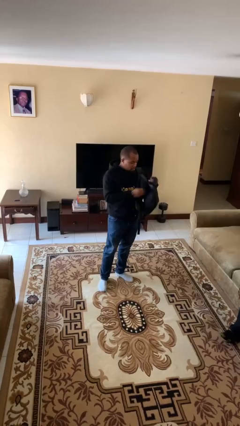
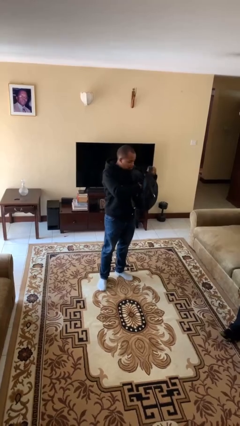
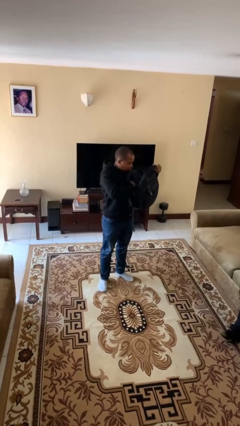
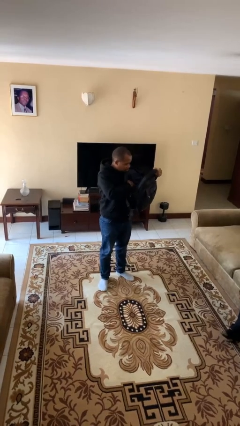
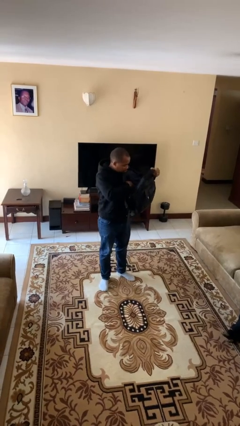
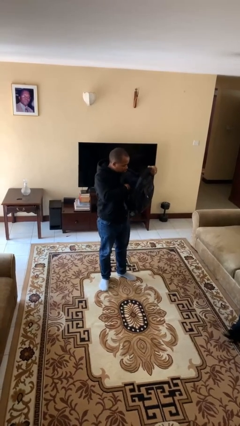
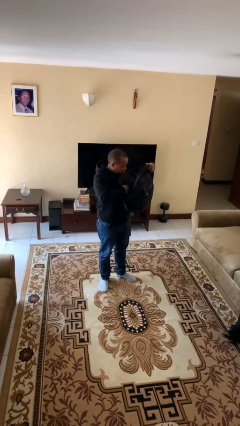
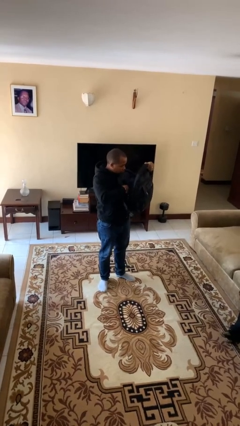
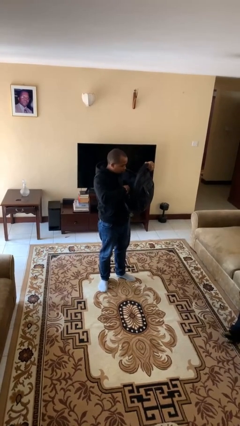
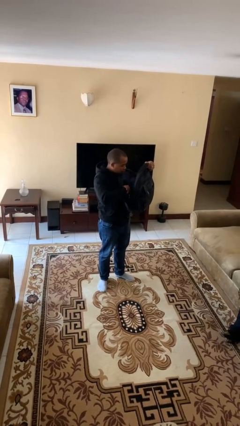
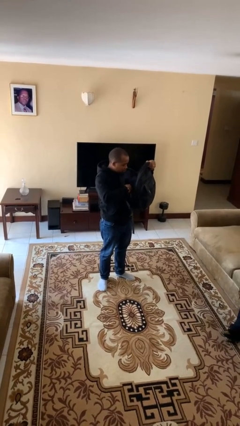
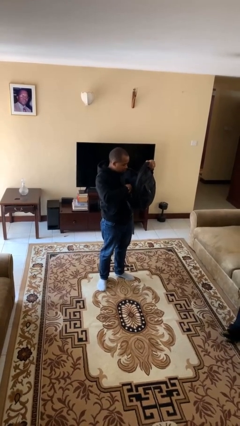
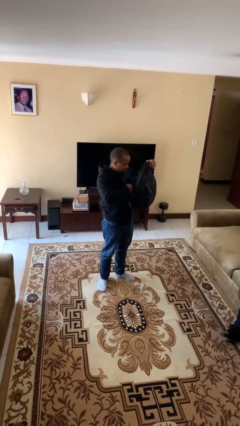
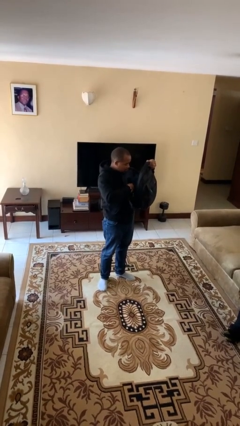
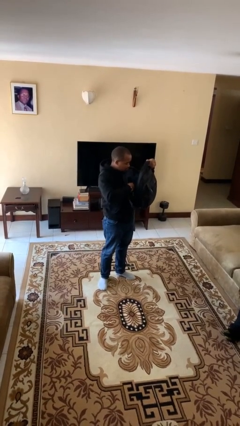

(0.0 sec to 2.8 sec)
person searches in backpack

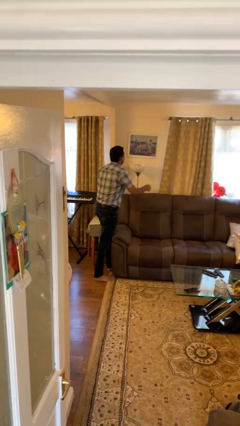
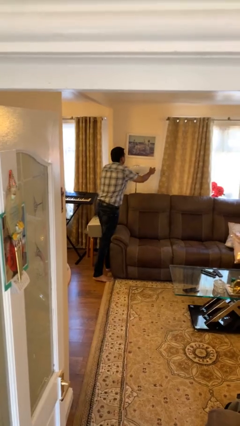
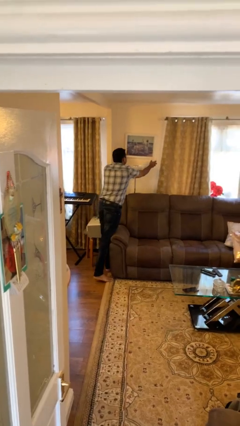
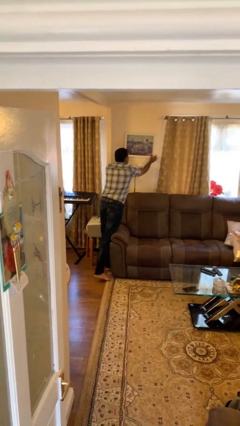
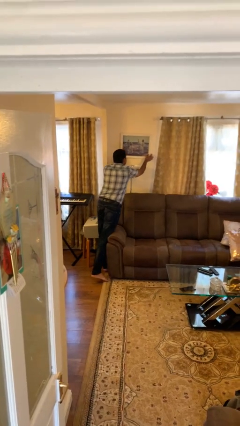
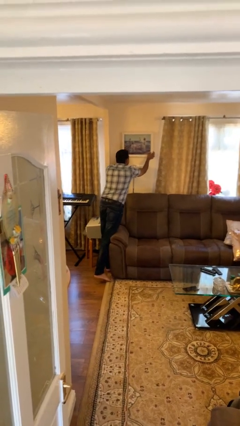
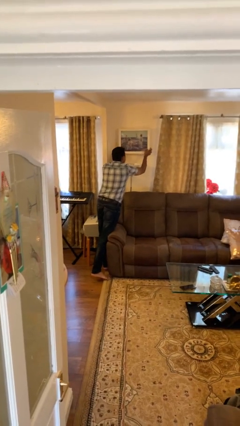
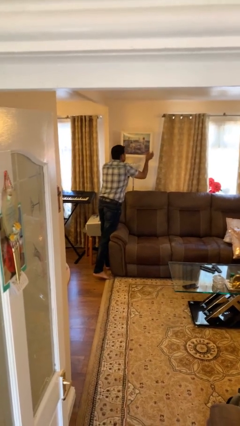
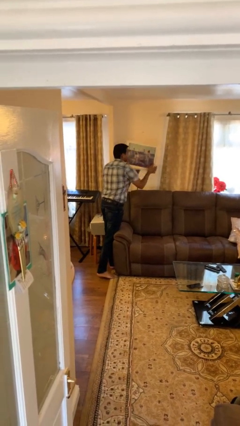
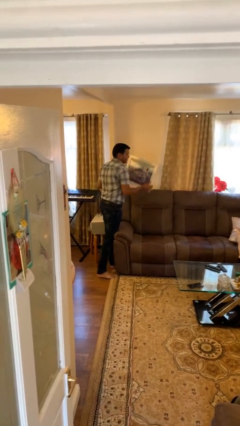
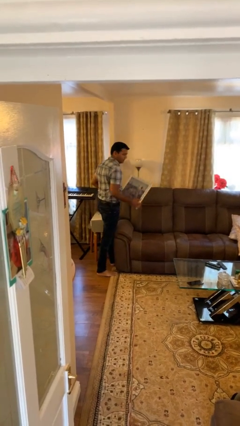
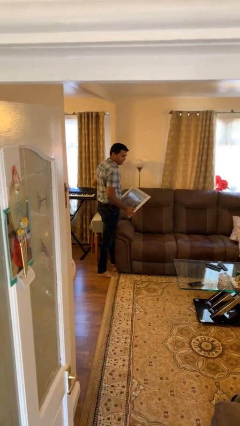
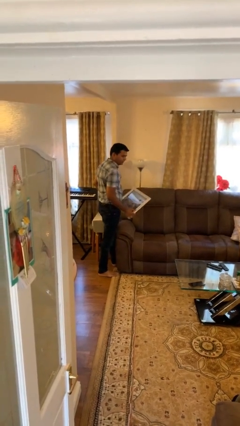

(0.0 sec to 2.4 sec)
person takes down picture frame

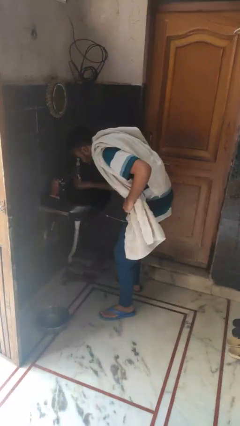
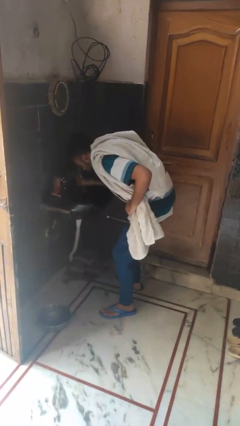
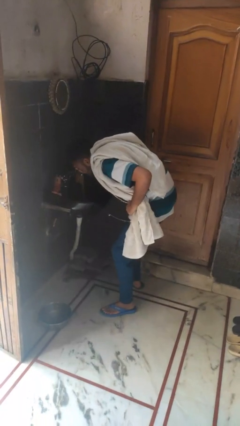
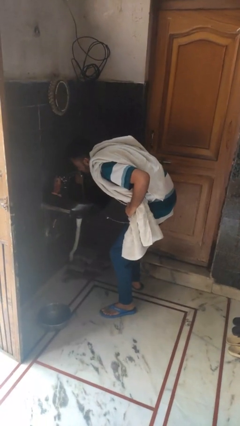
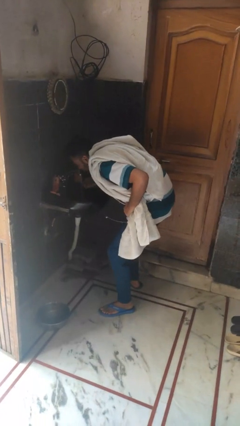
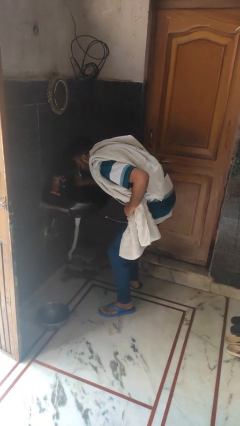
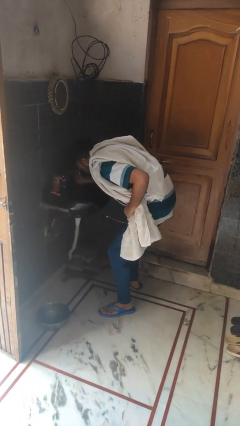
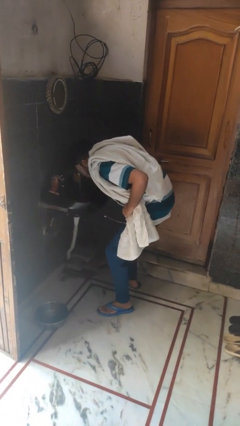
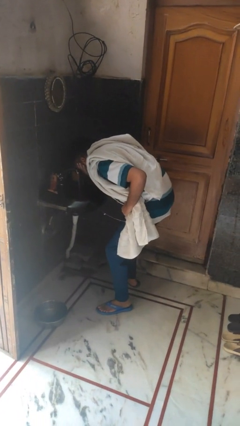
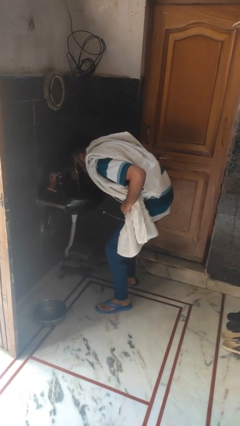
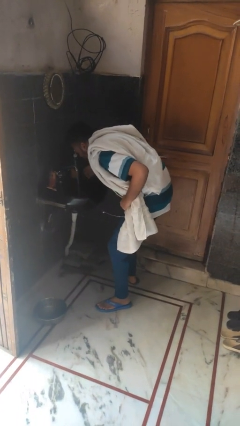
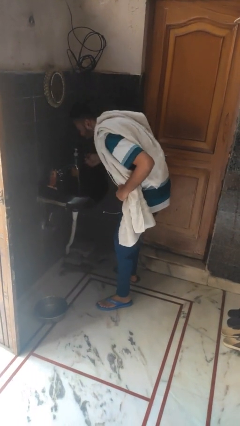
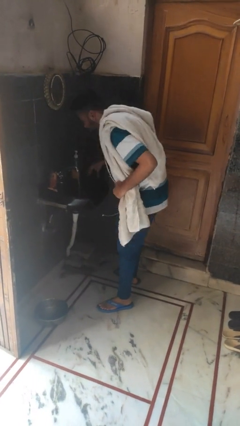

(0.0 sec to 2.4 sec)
person washes face

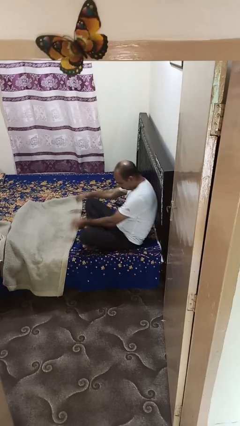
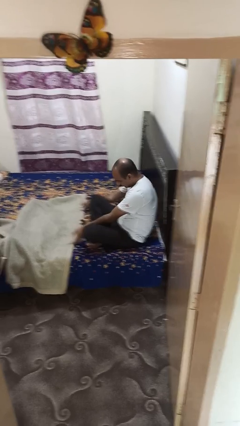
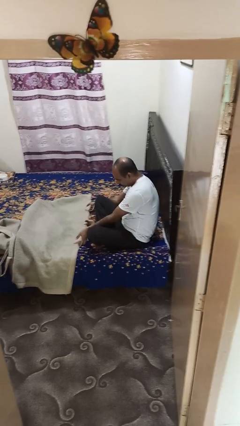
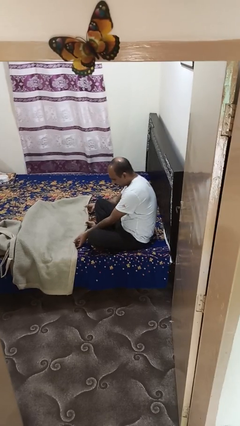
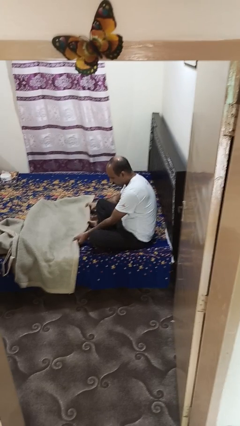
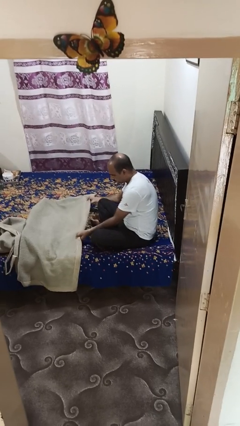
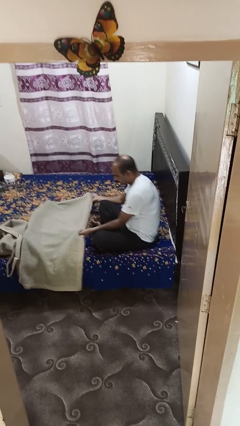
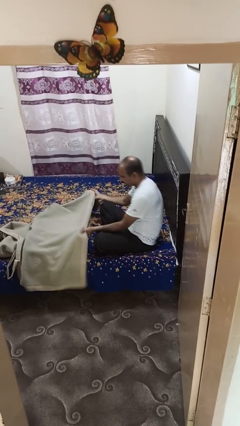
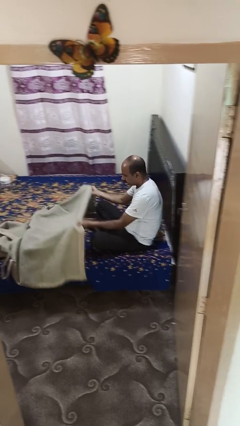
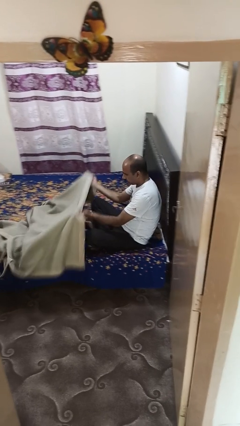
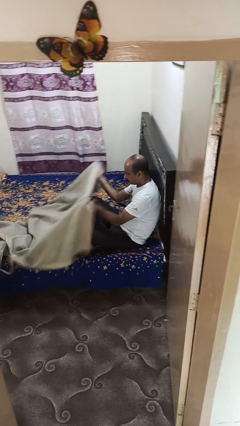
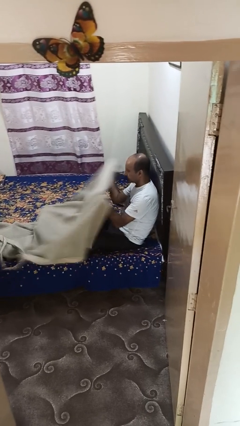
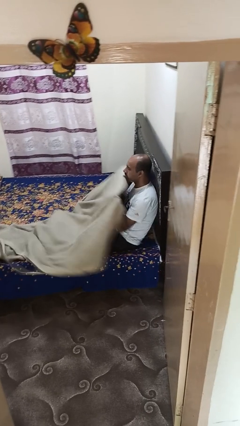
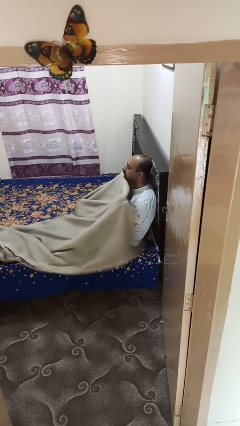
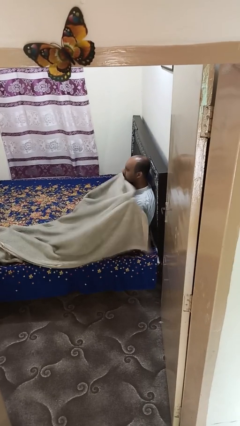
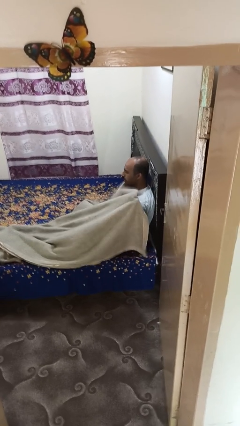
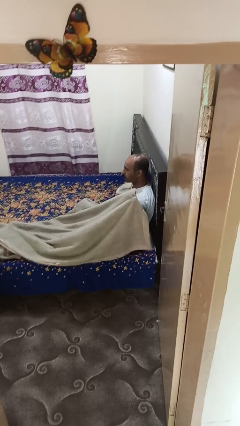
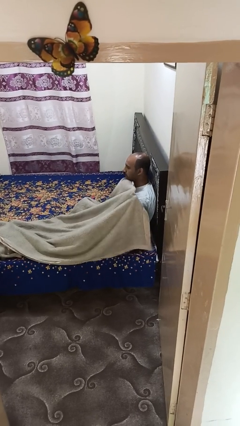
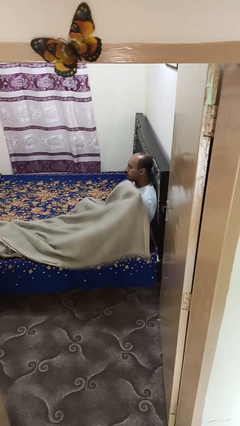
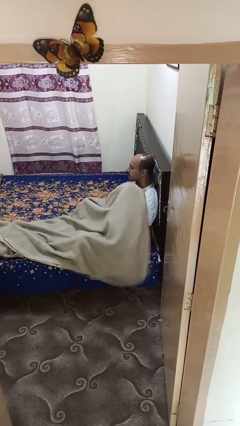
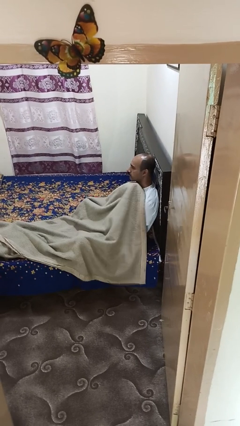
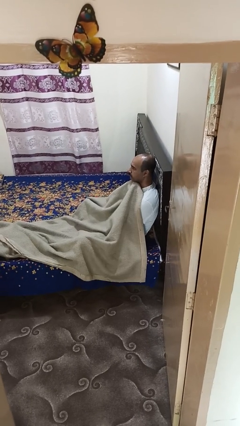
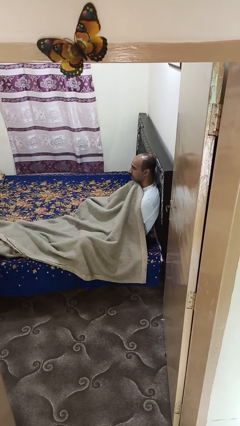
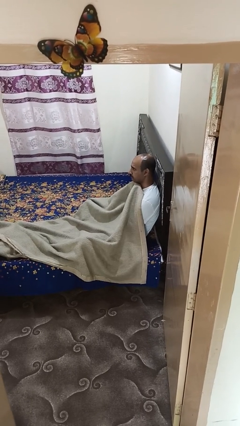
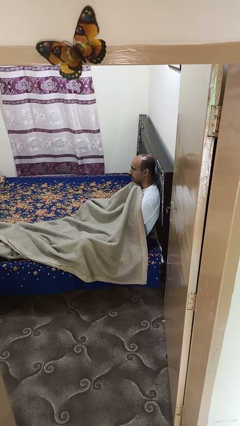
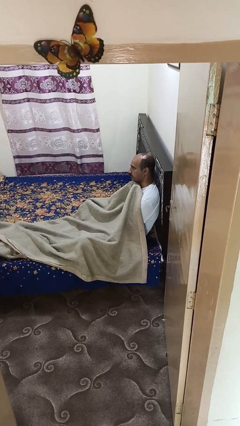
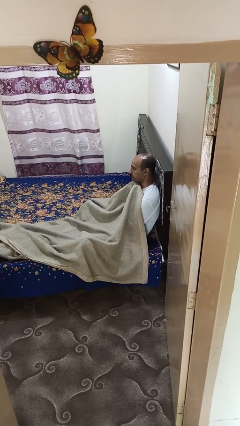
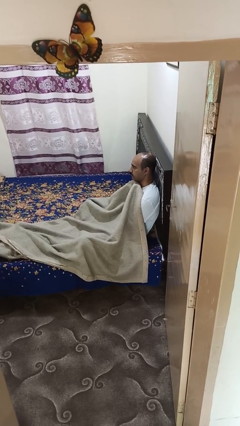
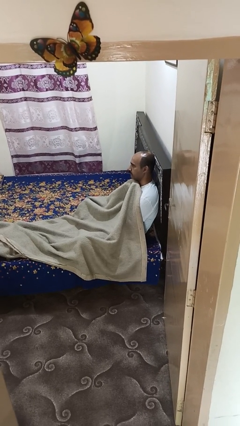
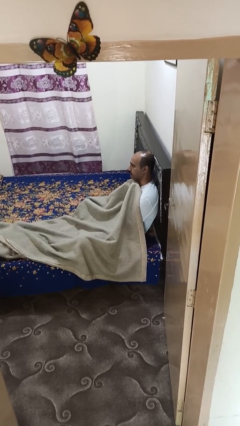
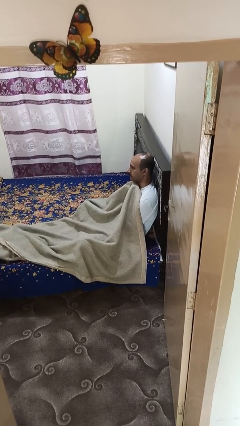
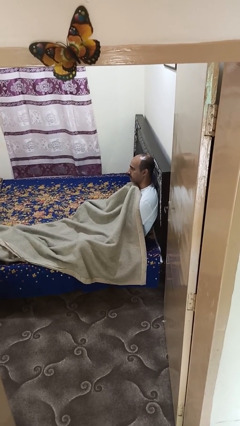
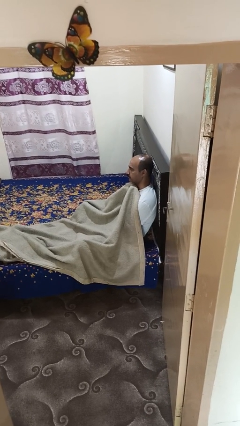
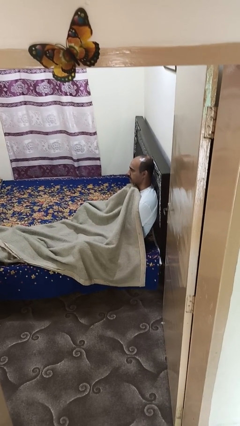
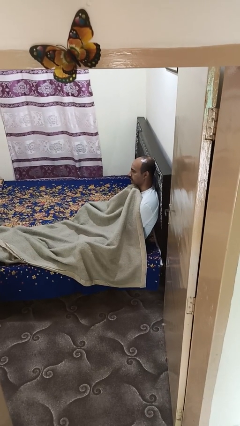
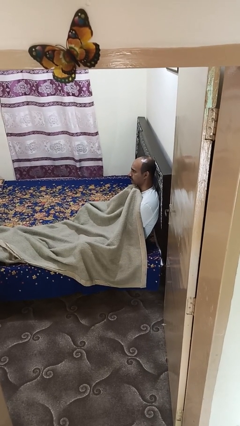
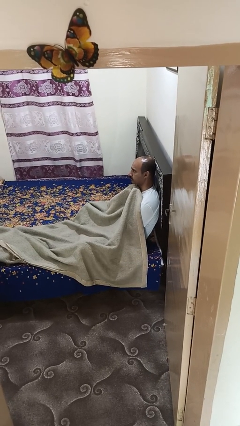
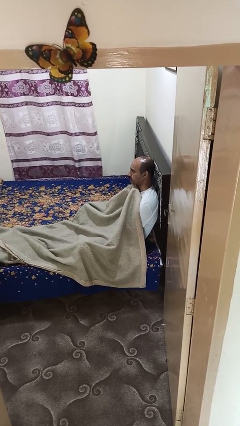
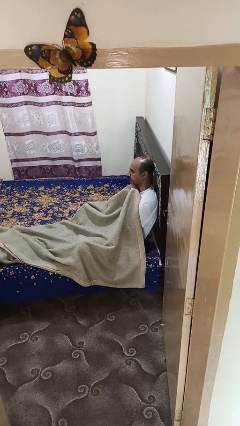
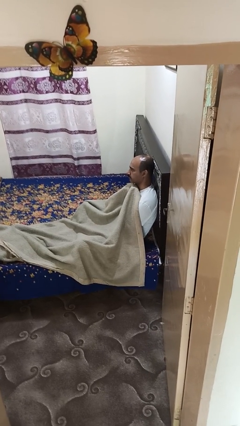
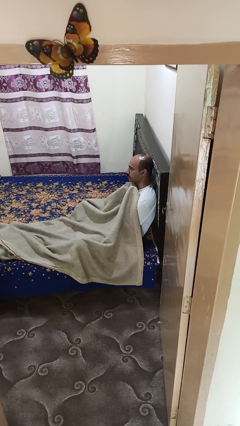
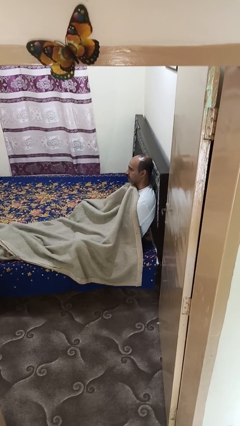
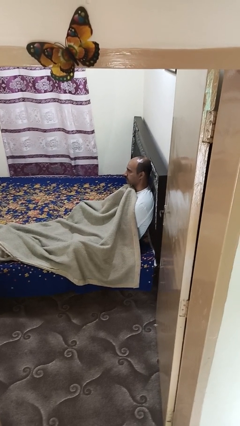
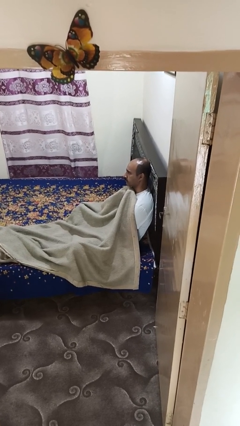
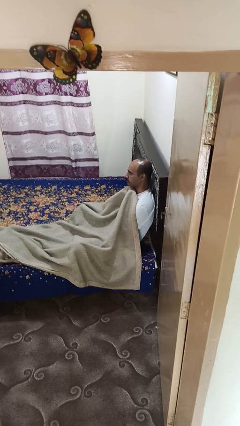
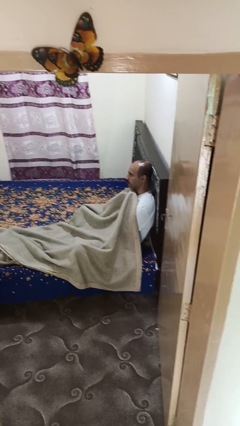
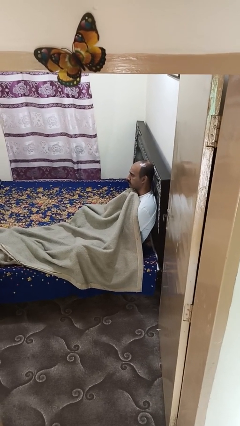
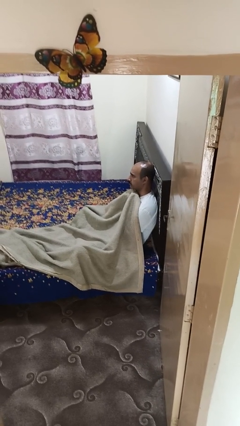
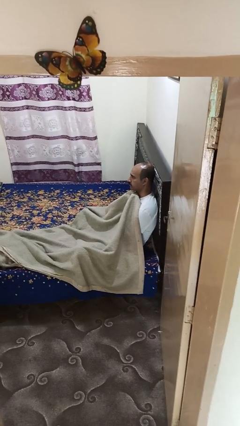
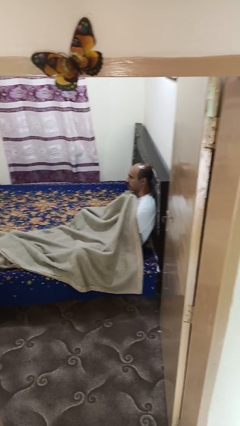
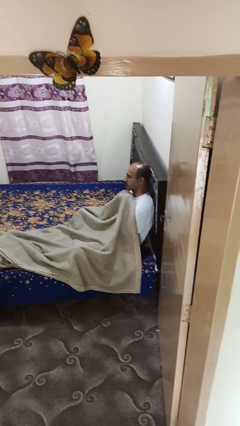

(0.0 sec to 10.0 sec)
person covers with blanket
